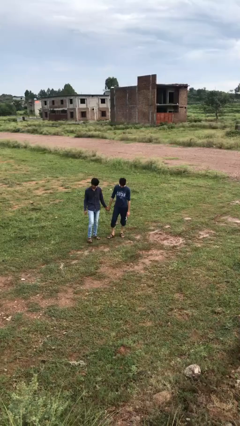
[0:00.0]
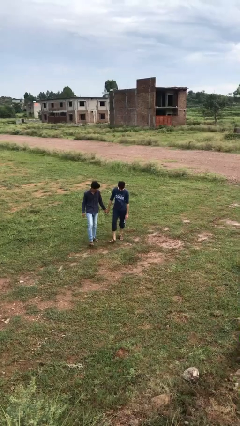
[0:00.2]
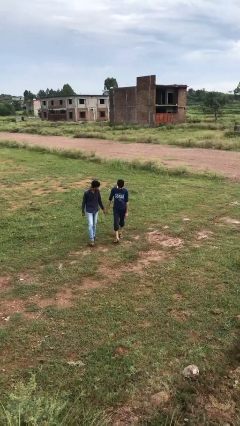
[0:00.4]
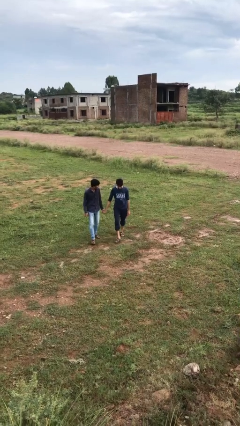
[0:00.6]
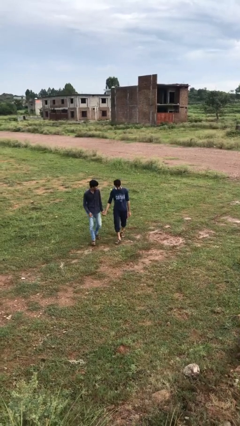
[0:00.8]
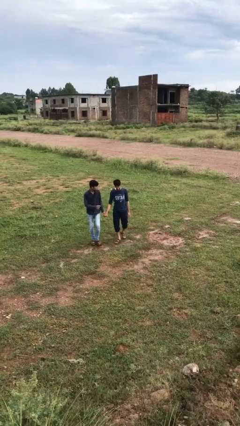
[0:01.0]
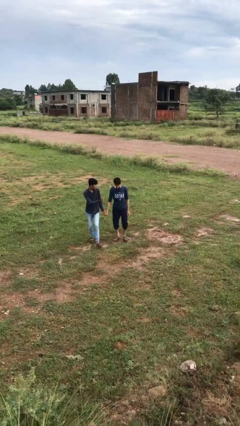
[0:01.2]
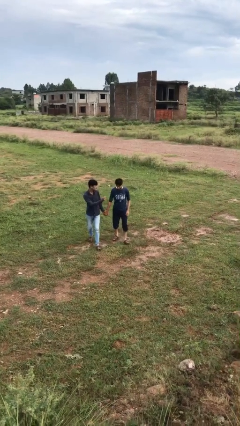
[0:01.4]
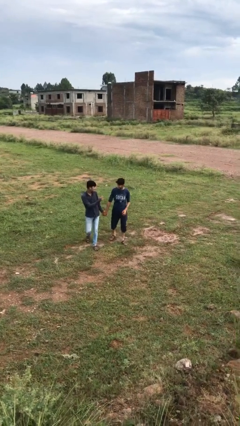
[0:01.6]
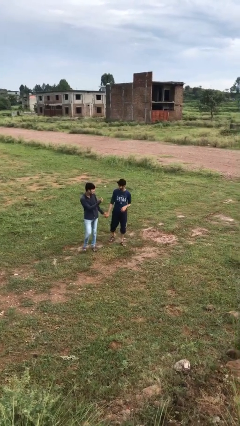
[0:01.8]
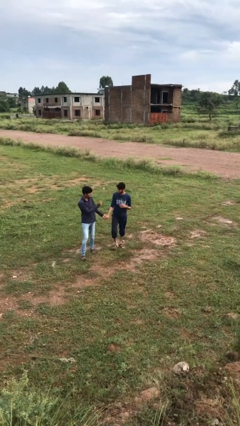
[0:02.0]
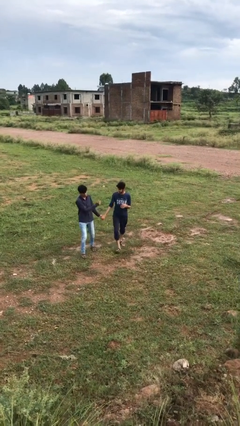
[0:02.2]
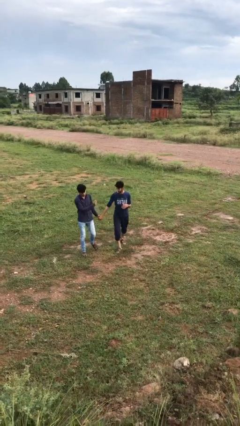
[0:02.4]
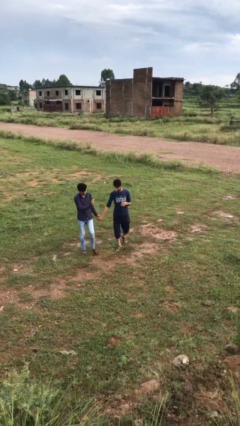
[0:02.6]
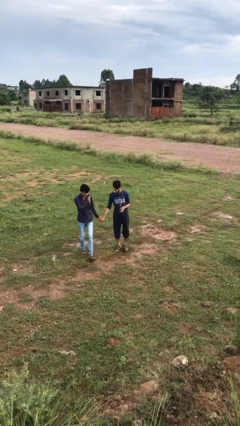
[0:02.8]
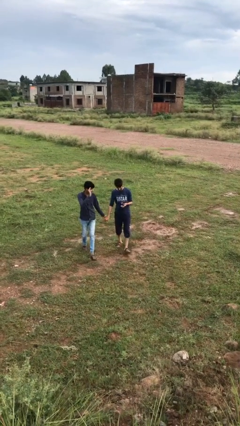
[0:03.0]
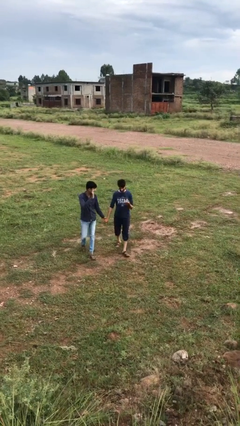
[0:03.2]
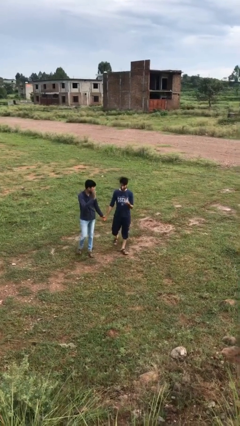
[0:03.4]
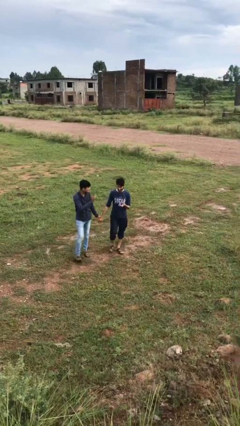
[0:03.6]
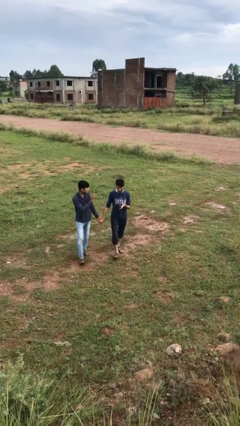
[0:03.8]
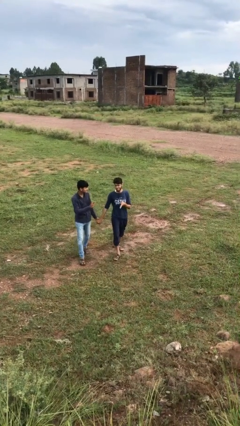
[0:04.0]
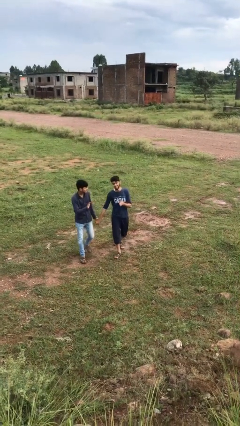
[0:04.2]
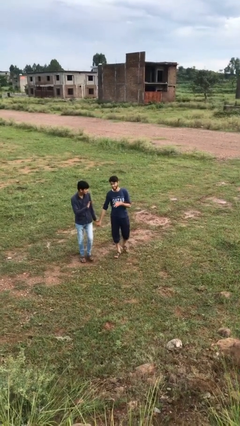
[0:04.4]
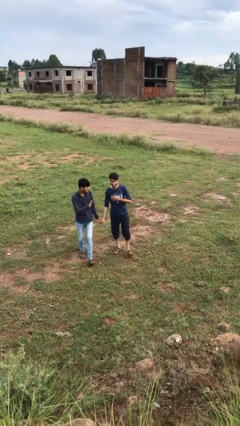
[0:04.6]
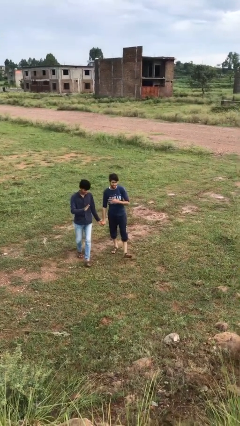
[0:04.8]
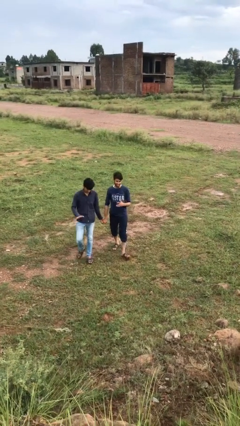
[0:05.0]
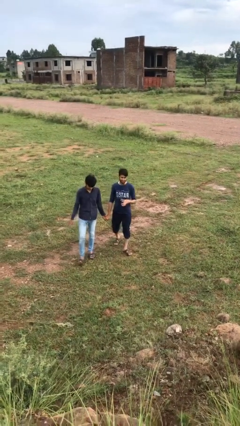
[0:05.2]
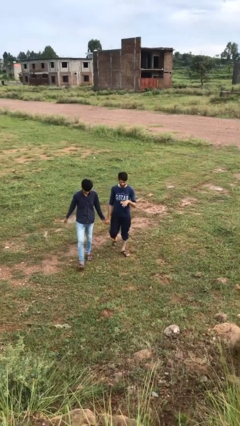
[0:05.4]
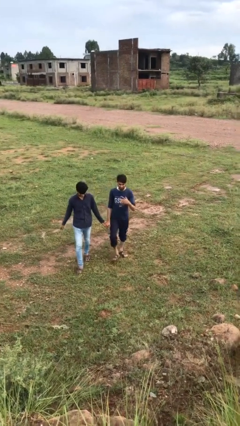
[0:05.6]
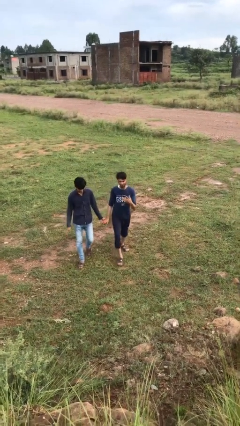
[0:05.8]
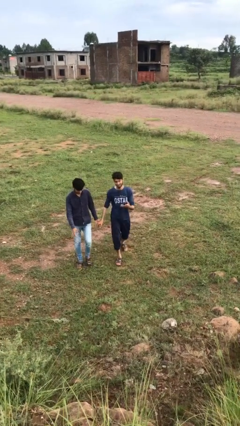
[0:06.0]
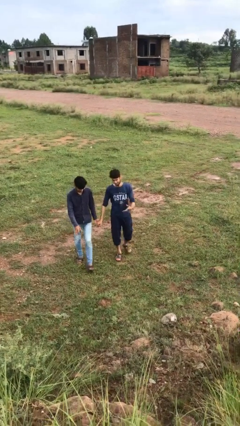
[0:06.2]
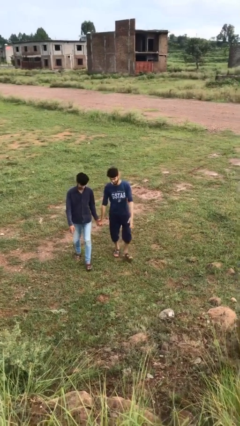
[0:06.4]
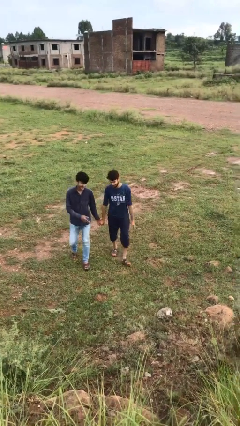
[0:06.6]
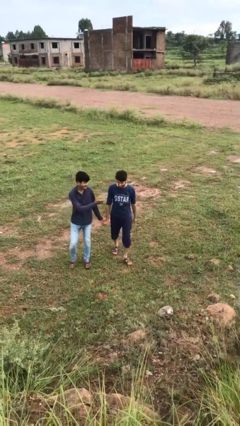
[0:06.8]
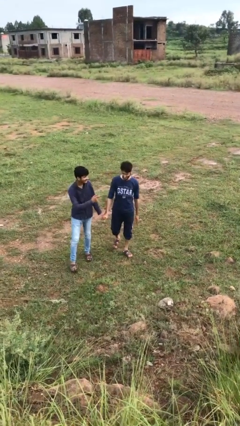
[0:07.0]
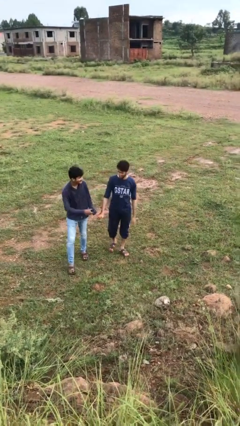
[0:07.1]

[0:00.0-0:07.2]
person holds hand

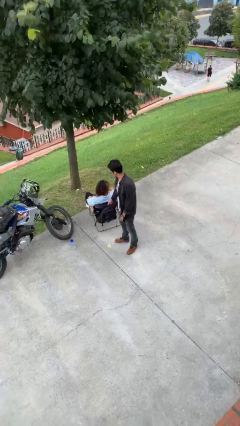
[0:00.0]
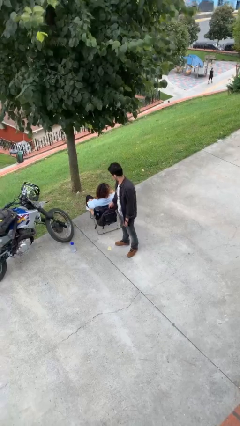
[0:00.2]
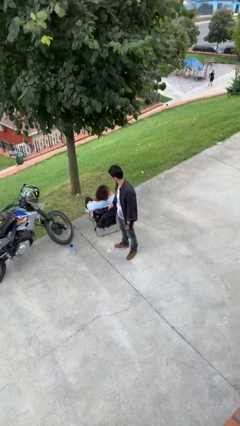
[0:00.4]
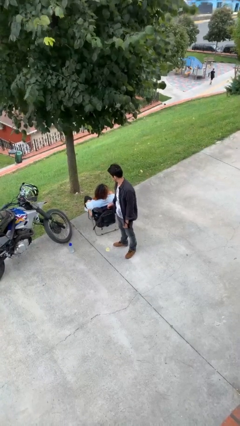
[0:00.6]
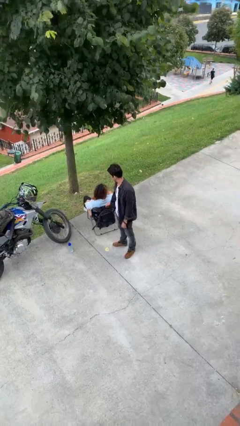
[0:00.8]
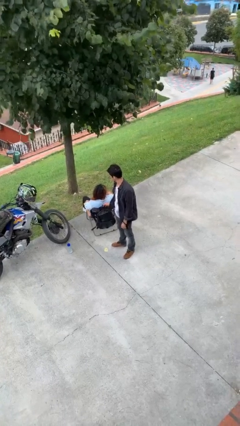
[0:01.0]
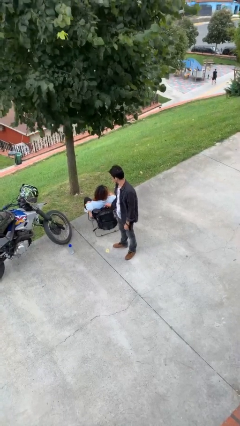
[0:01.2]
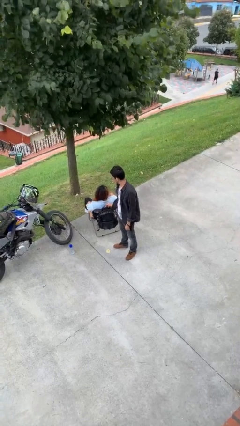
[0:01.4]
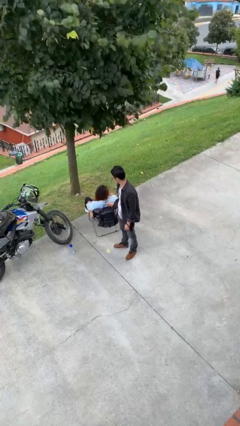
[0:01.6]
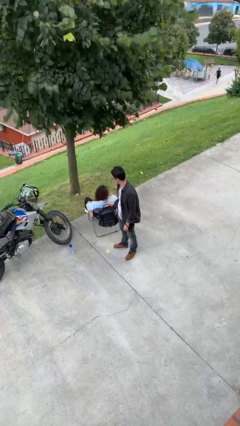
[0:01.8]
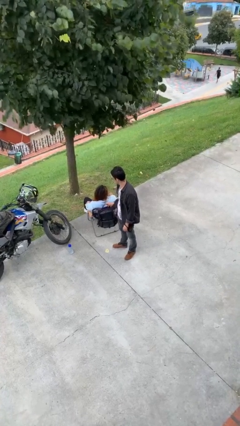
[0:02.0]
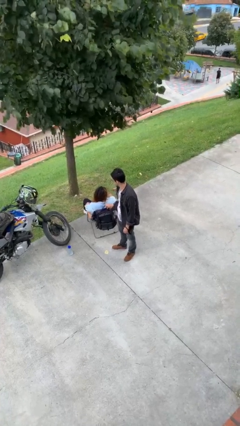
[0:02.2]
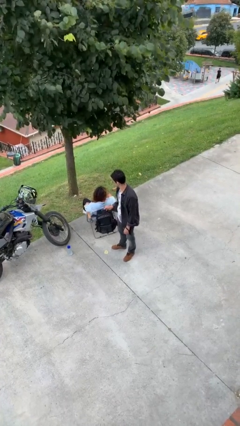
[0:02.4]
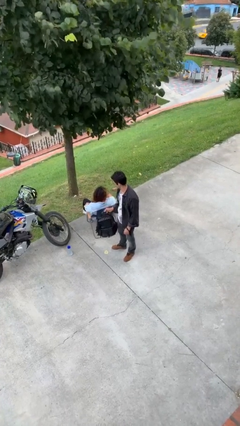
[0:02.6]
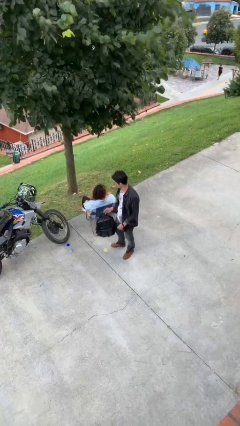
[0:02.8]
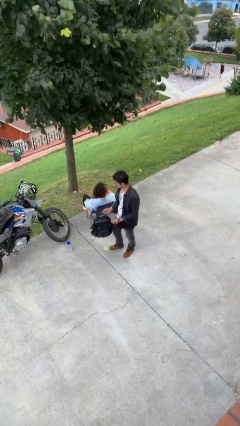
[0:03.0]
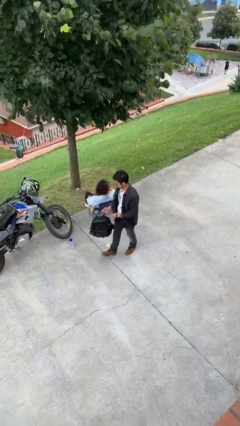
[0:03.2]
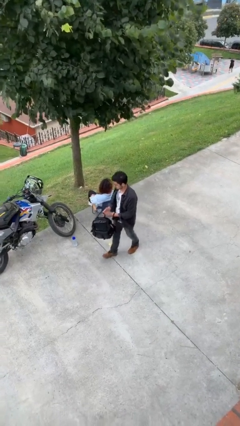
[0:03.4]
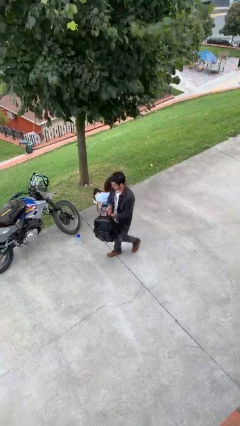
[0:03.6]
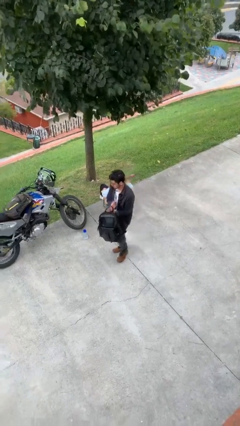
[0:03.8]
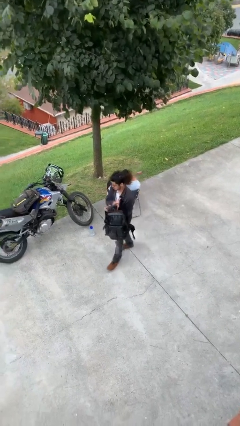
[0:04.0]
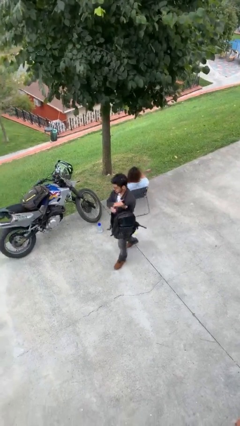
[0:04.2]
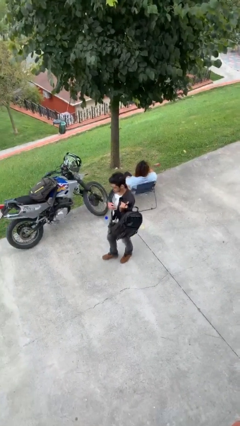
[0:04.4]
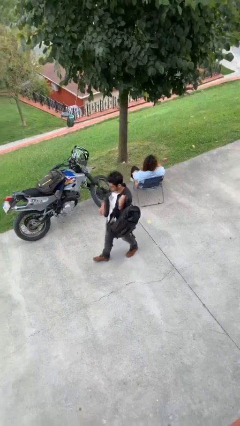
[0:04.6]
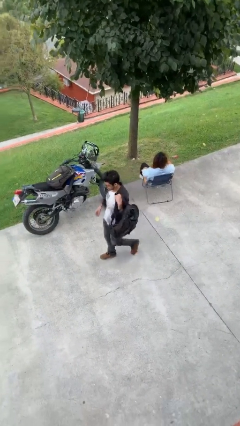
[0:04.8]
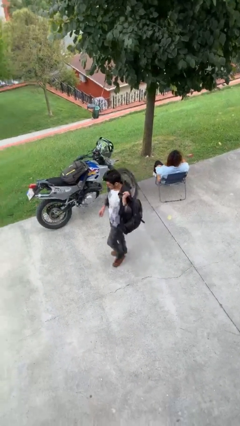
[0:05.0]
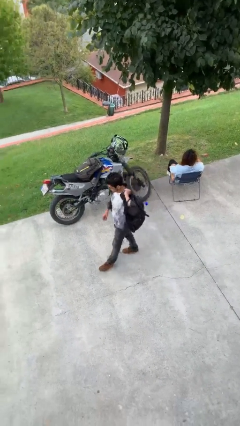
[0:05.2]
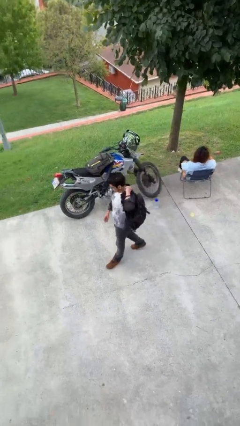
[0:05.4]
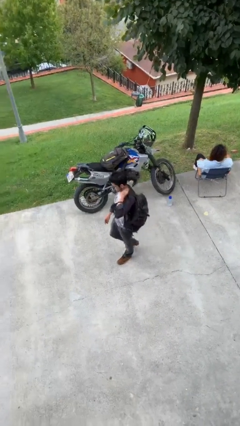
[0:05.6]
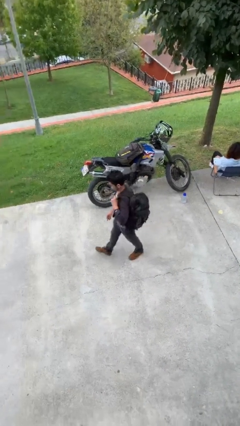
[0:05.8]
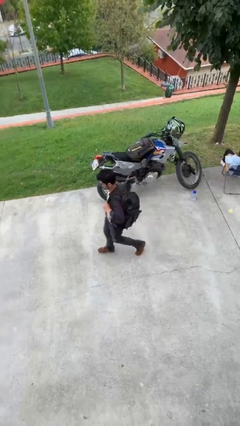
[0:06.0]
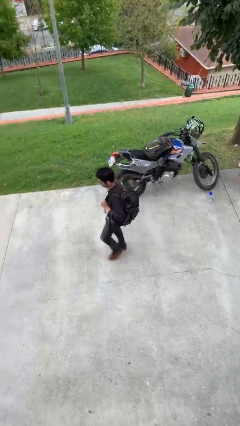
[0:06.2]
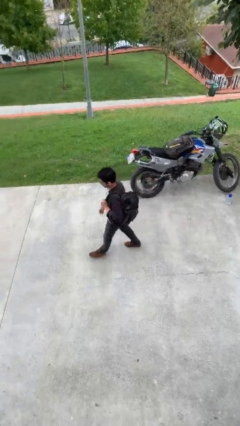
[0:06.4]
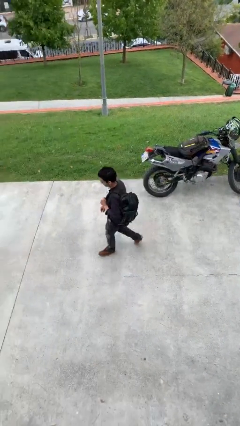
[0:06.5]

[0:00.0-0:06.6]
person steals object from person

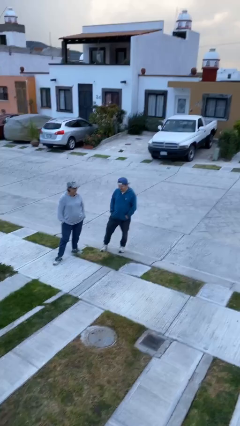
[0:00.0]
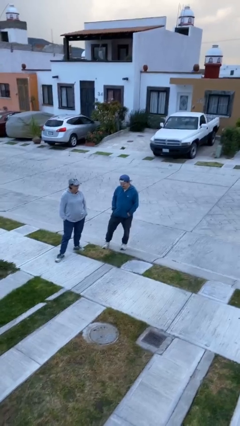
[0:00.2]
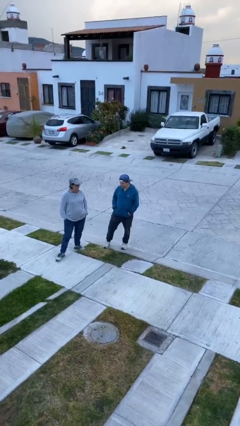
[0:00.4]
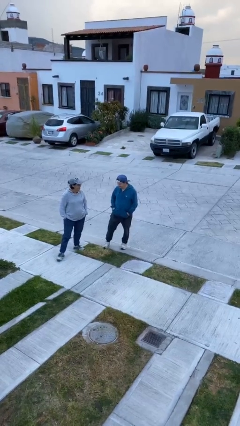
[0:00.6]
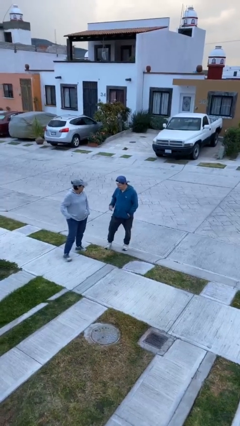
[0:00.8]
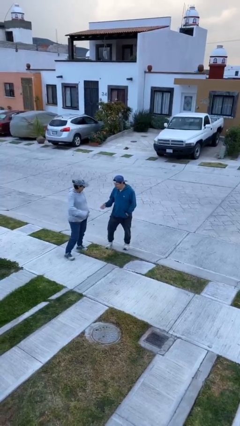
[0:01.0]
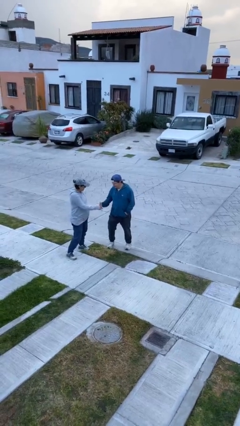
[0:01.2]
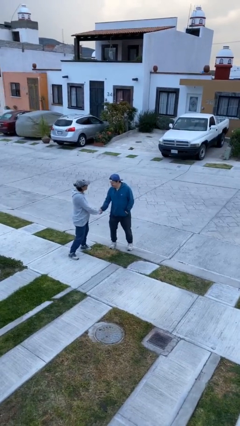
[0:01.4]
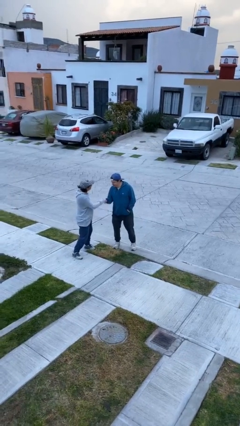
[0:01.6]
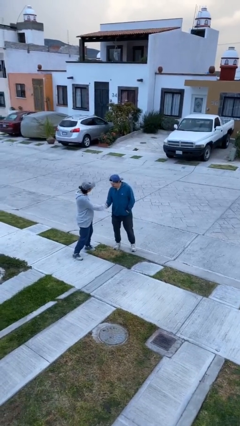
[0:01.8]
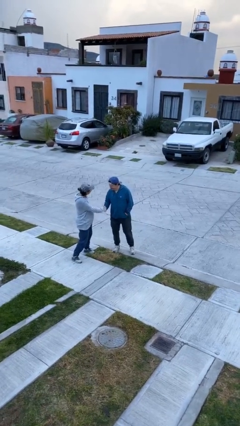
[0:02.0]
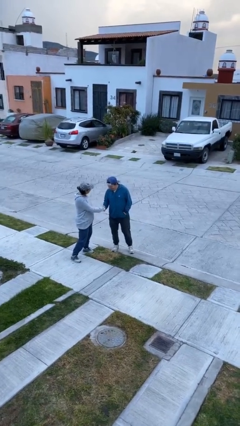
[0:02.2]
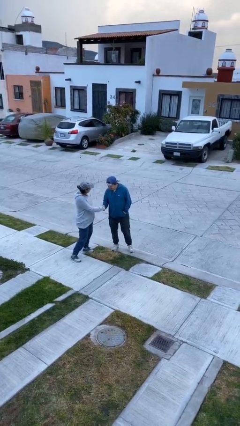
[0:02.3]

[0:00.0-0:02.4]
person shakes hand

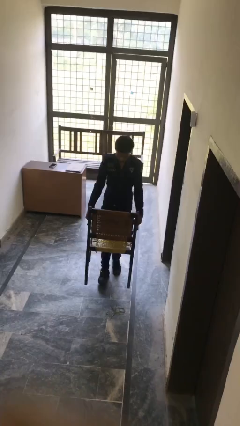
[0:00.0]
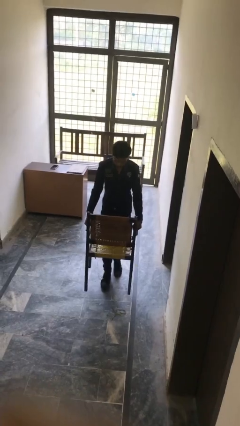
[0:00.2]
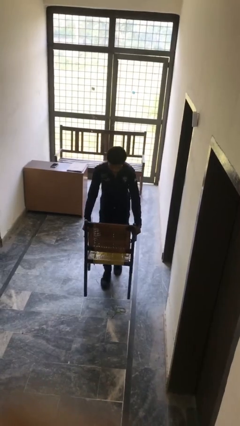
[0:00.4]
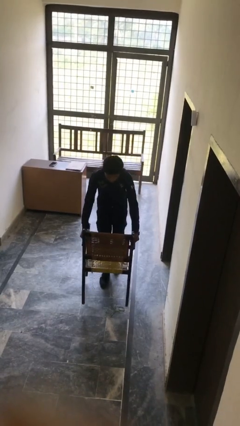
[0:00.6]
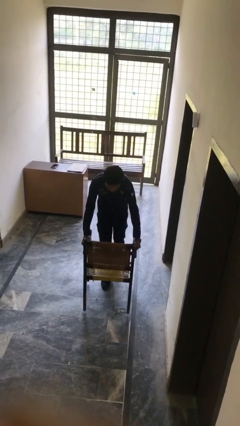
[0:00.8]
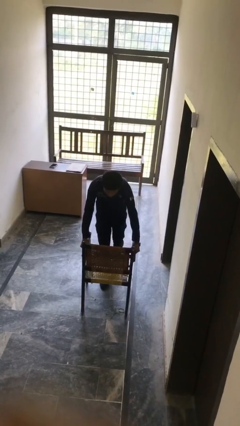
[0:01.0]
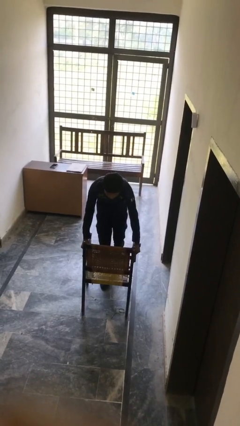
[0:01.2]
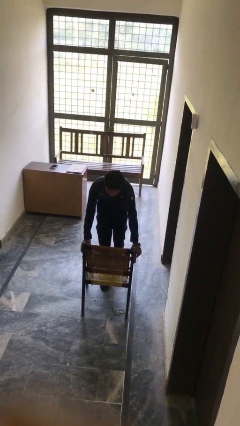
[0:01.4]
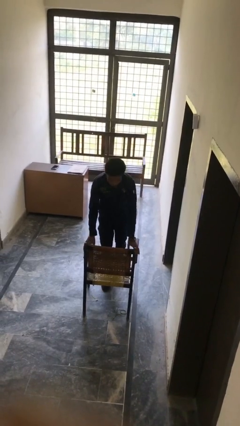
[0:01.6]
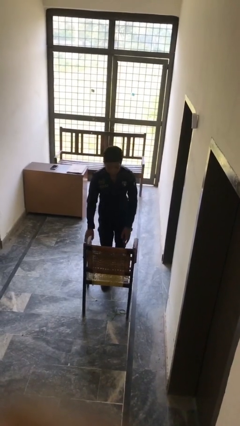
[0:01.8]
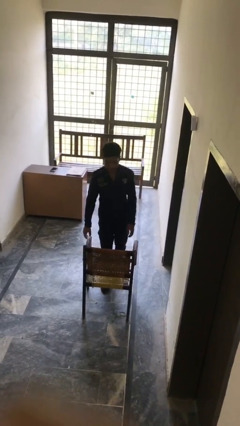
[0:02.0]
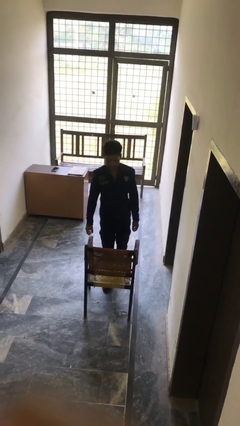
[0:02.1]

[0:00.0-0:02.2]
person puts down object on floor
